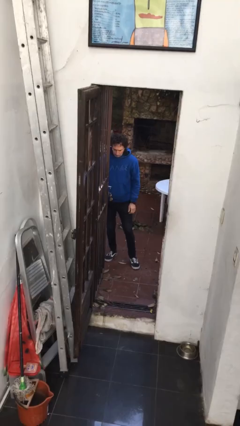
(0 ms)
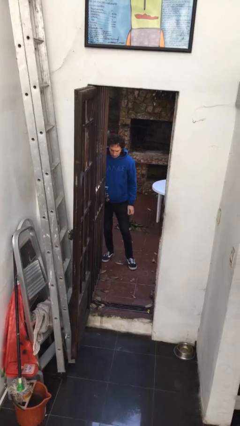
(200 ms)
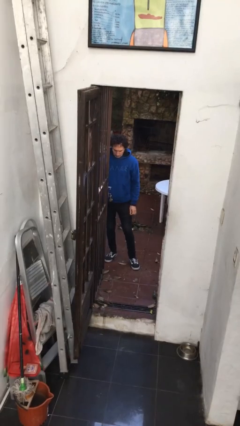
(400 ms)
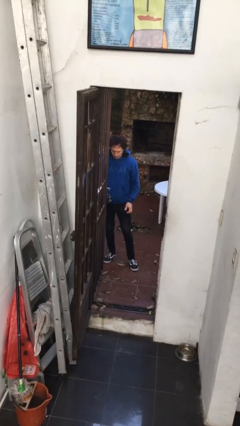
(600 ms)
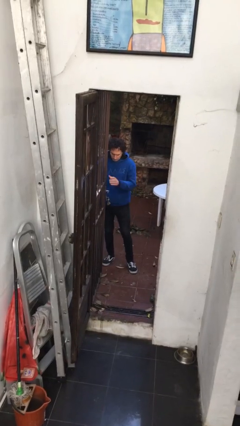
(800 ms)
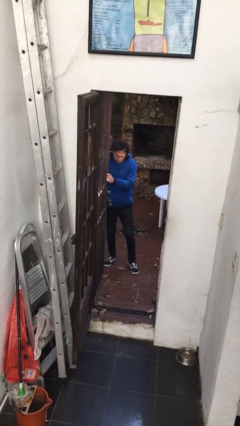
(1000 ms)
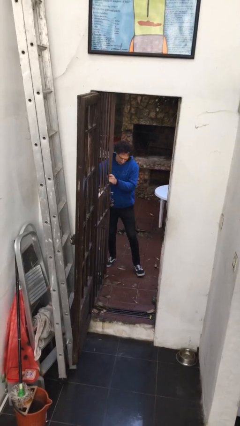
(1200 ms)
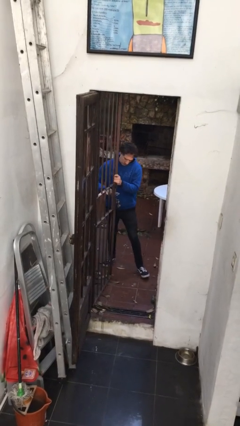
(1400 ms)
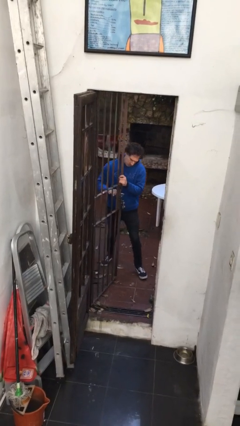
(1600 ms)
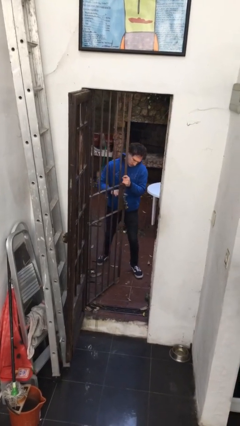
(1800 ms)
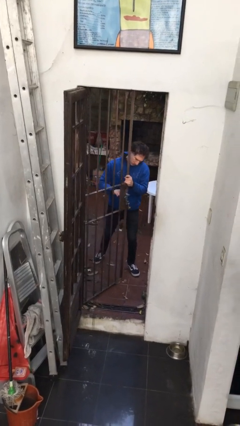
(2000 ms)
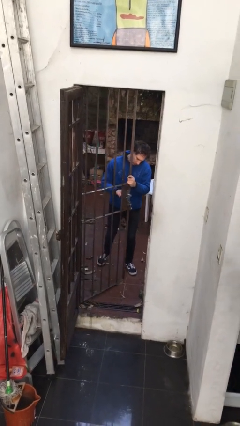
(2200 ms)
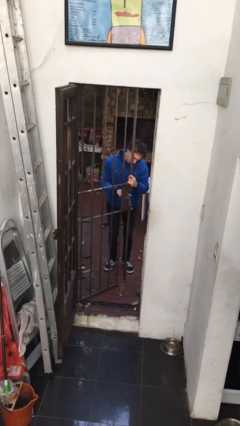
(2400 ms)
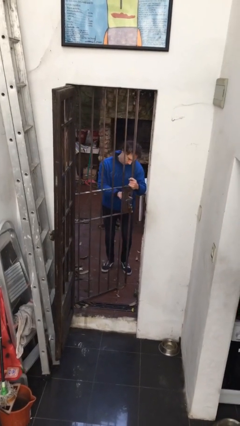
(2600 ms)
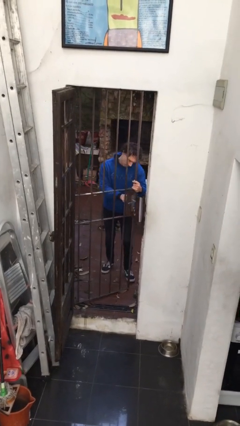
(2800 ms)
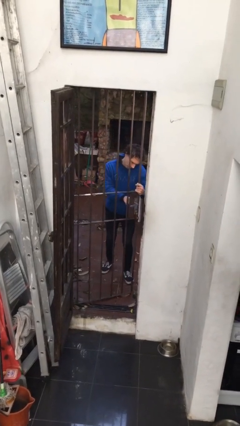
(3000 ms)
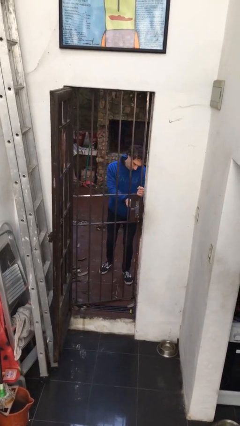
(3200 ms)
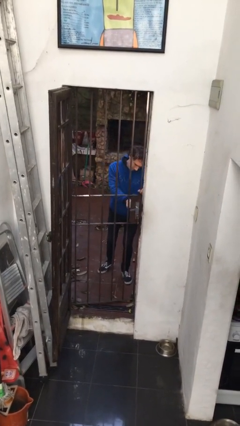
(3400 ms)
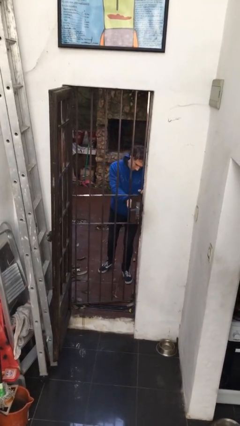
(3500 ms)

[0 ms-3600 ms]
person closes gate

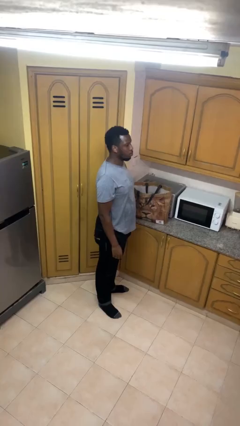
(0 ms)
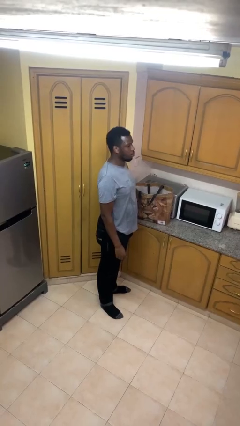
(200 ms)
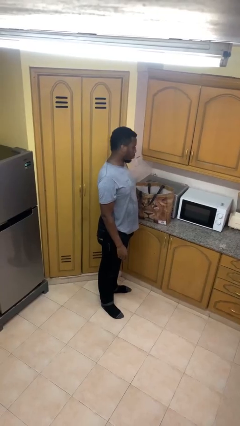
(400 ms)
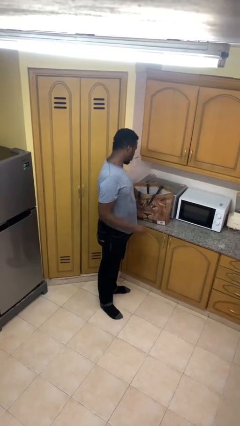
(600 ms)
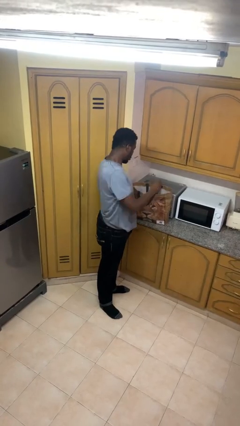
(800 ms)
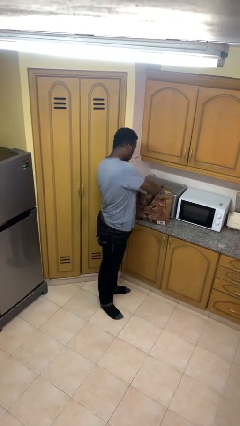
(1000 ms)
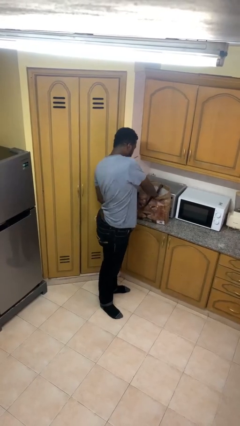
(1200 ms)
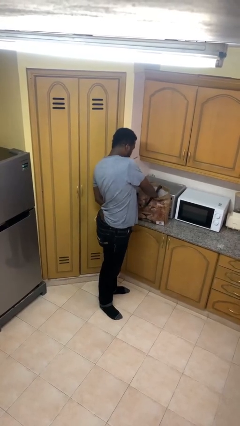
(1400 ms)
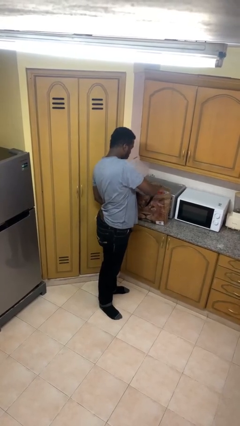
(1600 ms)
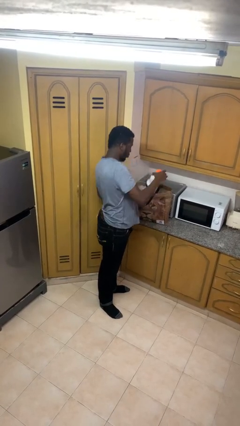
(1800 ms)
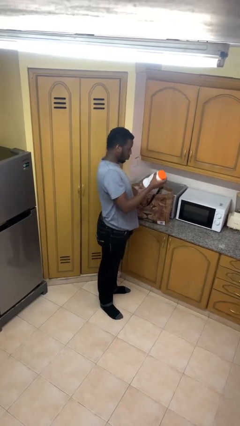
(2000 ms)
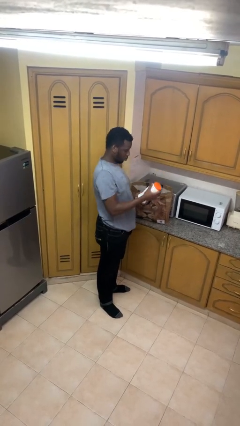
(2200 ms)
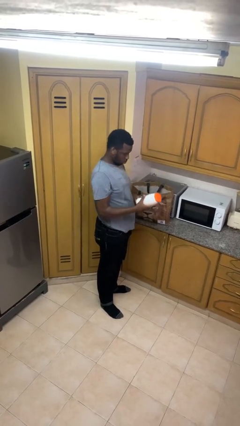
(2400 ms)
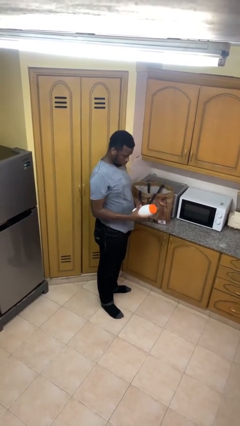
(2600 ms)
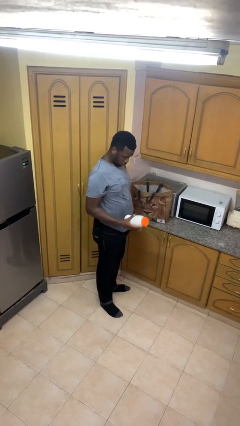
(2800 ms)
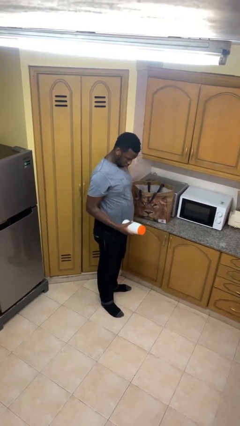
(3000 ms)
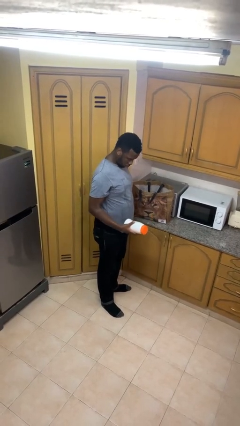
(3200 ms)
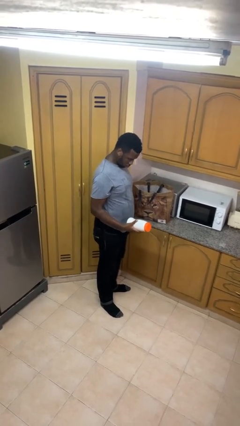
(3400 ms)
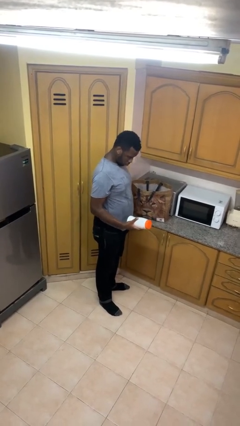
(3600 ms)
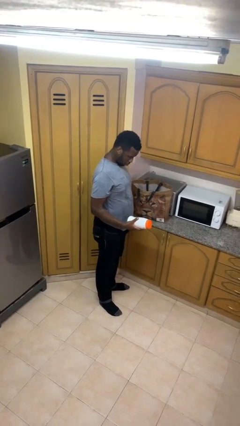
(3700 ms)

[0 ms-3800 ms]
person takes object from bag

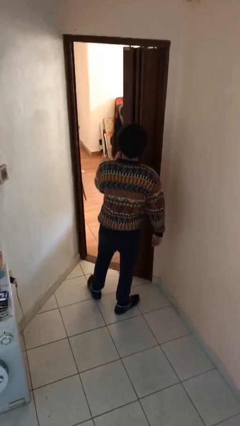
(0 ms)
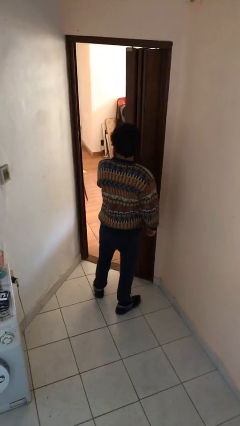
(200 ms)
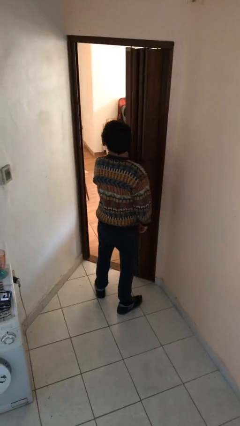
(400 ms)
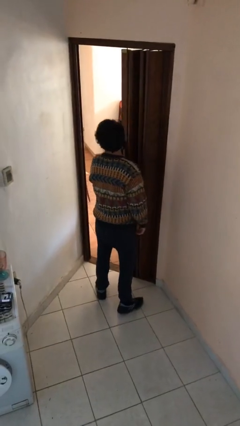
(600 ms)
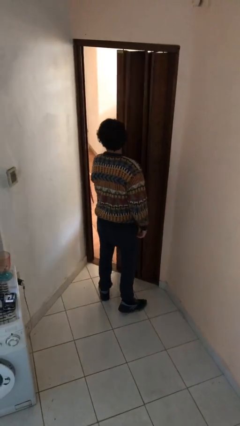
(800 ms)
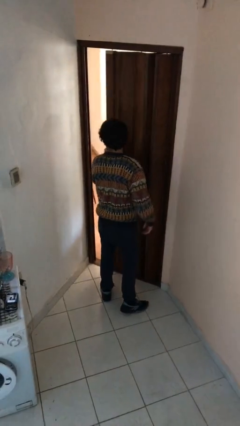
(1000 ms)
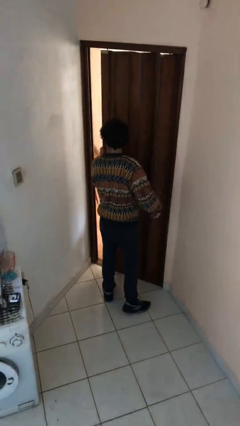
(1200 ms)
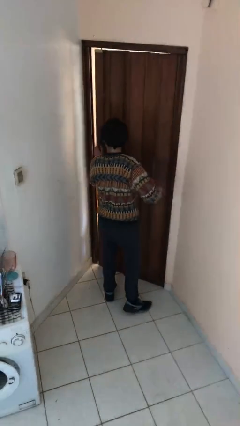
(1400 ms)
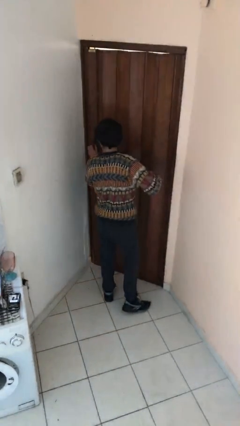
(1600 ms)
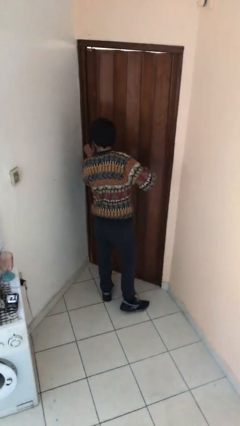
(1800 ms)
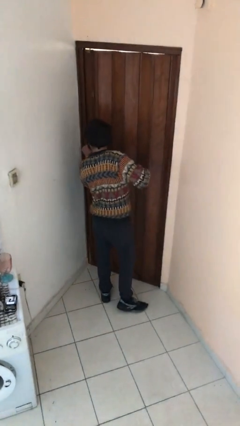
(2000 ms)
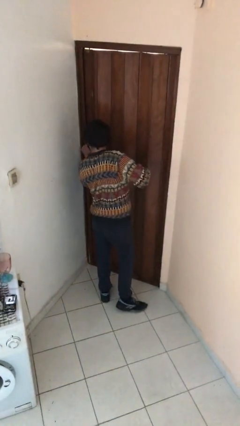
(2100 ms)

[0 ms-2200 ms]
person closes sliding door

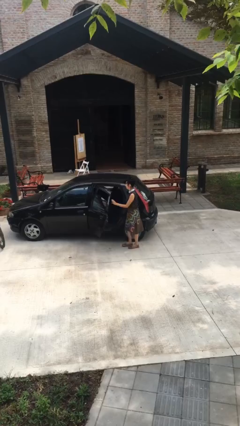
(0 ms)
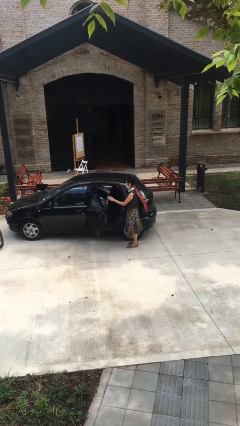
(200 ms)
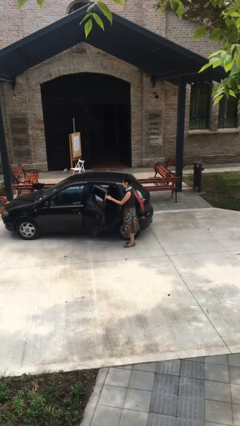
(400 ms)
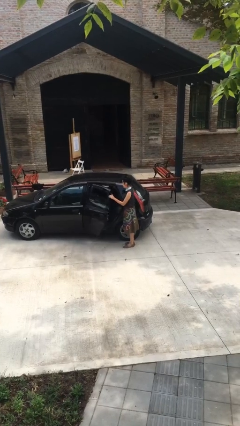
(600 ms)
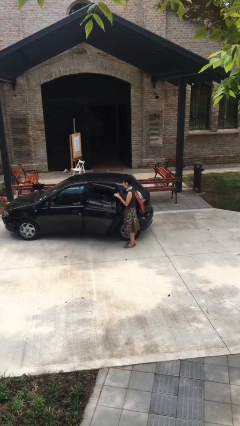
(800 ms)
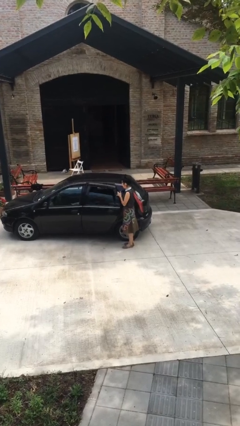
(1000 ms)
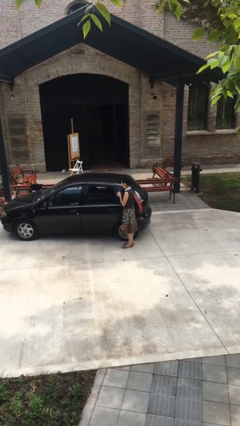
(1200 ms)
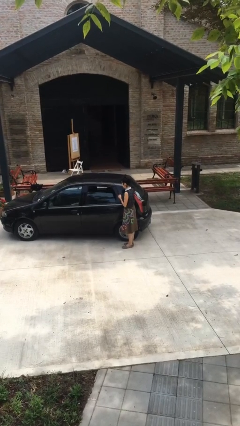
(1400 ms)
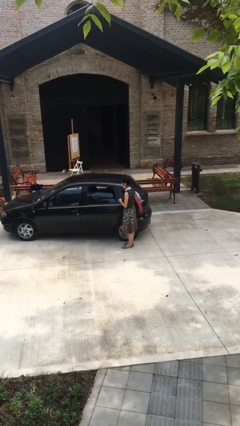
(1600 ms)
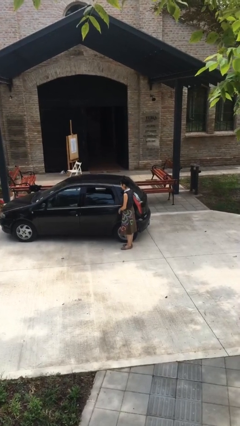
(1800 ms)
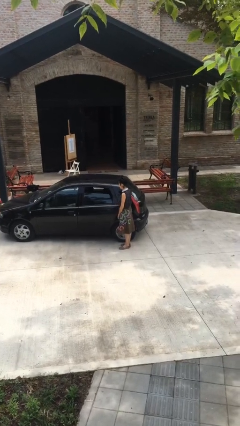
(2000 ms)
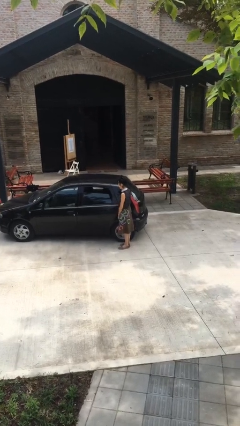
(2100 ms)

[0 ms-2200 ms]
person closes car door

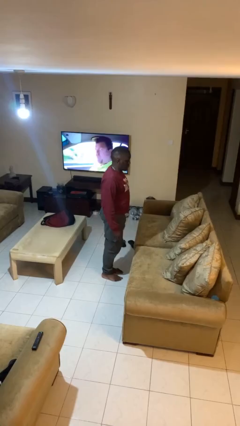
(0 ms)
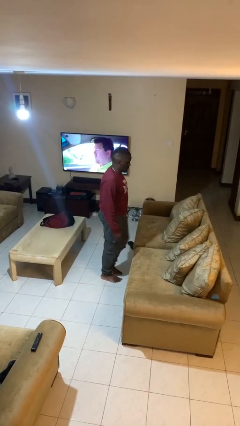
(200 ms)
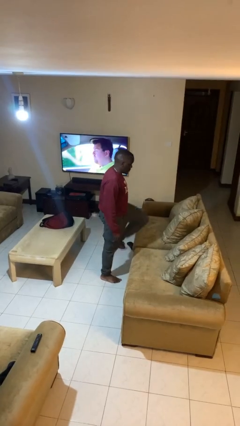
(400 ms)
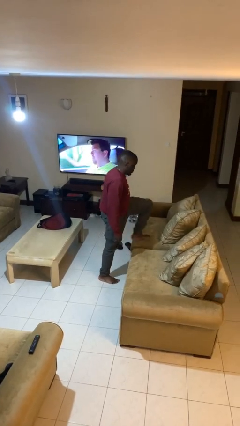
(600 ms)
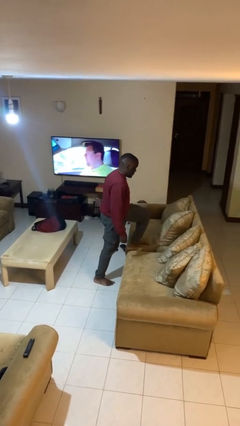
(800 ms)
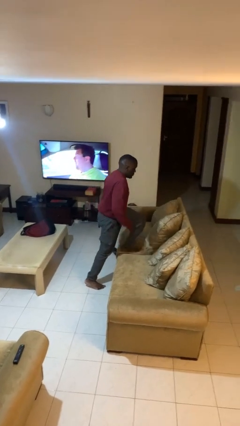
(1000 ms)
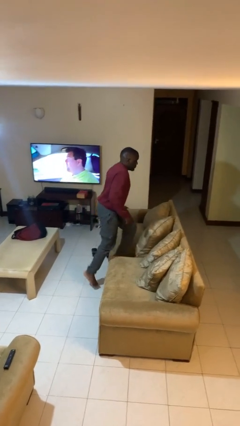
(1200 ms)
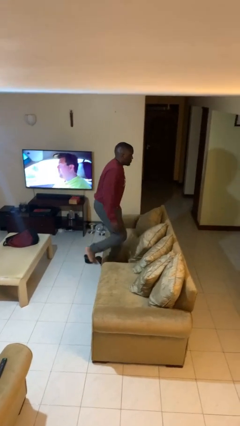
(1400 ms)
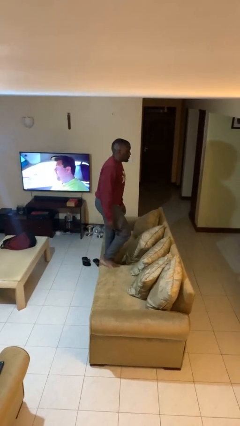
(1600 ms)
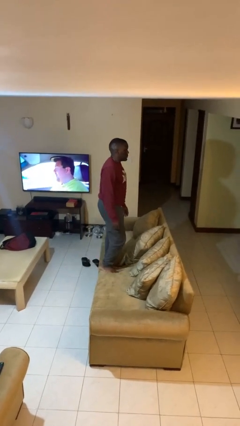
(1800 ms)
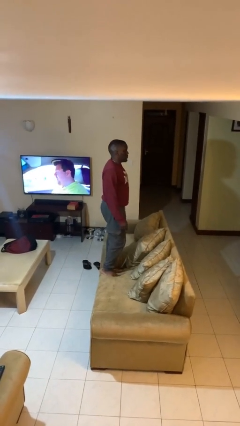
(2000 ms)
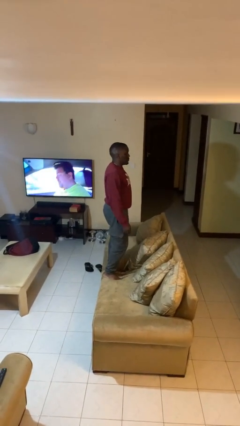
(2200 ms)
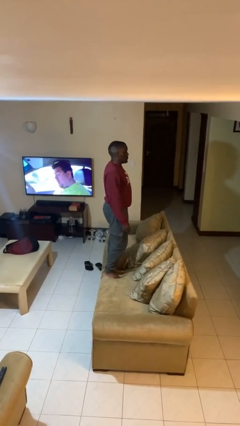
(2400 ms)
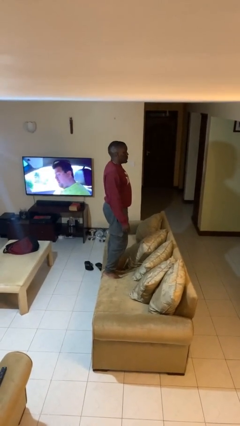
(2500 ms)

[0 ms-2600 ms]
person climbs on couch

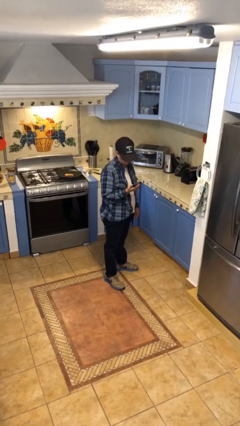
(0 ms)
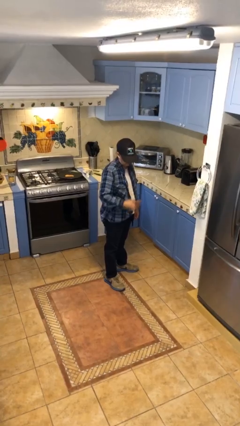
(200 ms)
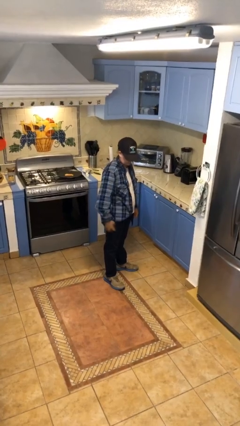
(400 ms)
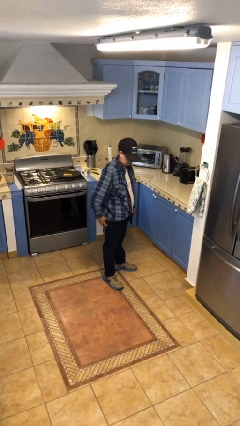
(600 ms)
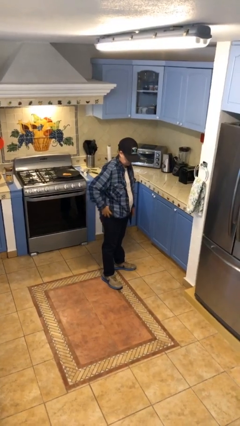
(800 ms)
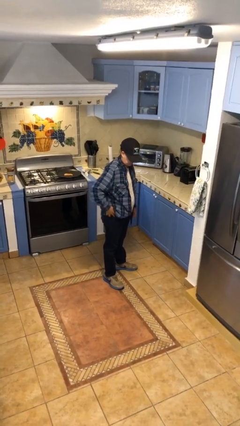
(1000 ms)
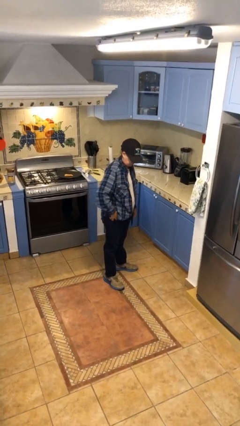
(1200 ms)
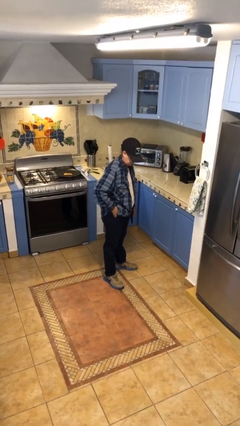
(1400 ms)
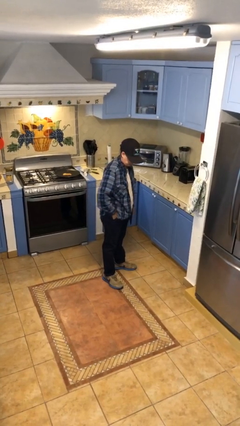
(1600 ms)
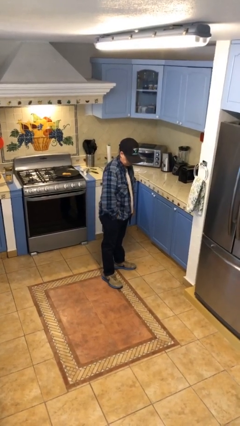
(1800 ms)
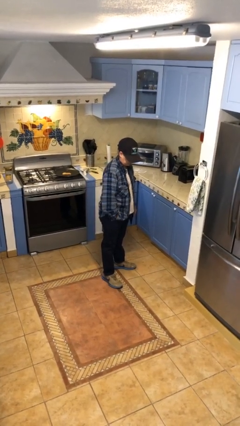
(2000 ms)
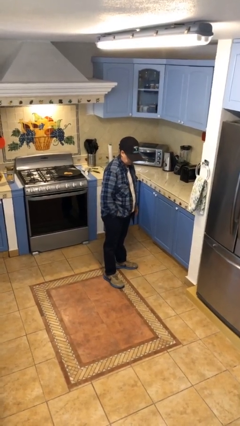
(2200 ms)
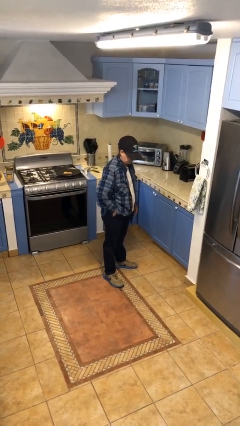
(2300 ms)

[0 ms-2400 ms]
person puts phone into pocket

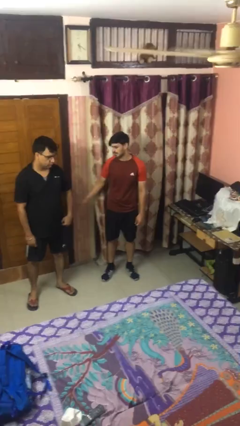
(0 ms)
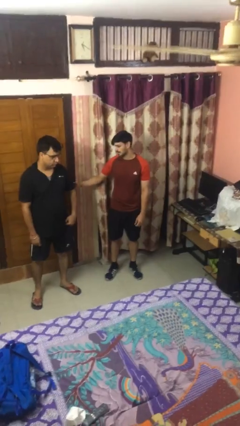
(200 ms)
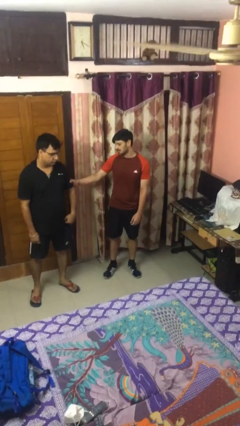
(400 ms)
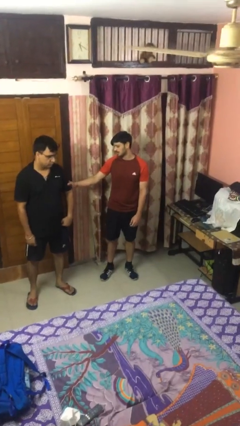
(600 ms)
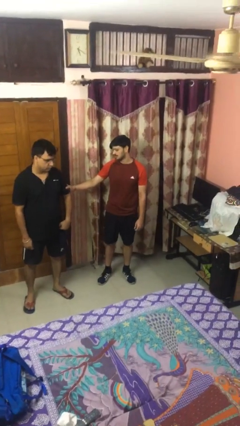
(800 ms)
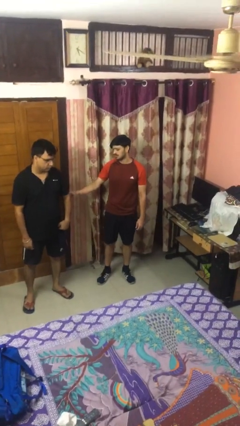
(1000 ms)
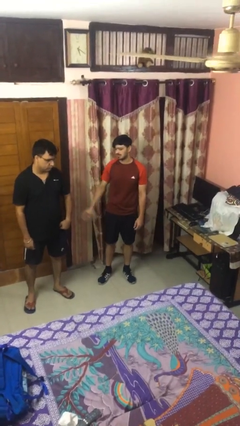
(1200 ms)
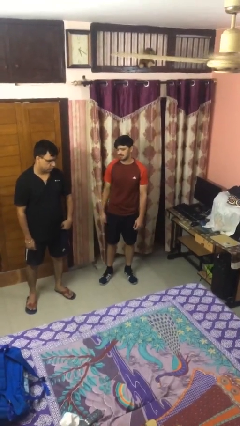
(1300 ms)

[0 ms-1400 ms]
person grabs person by bicep
